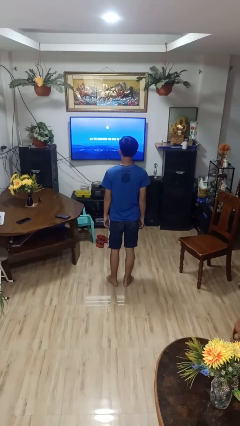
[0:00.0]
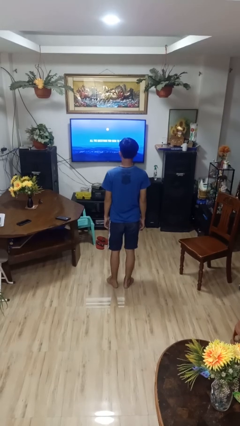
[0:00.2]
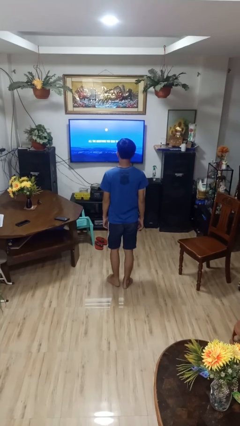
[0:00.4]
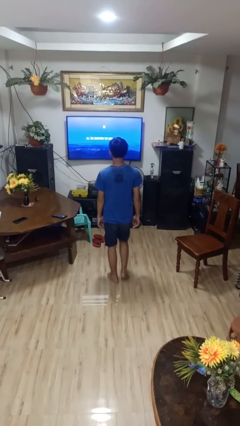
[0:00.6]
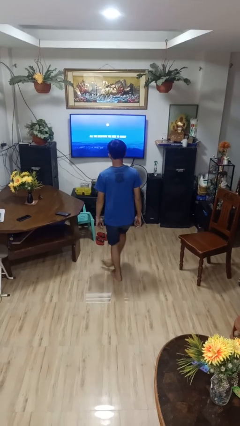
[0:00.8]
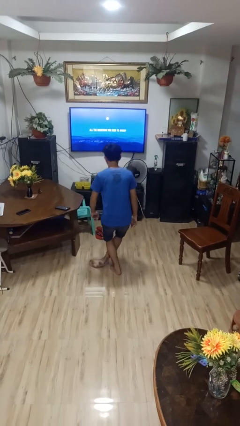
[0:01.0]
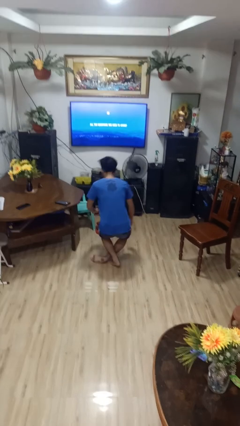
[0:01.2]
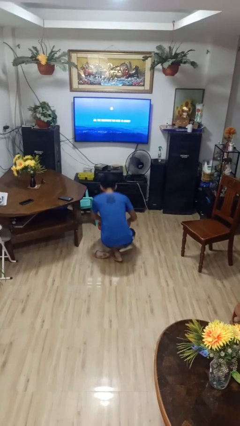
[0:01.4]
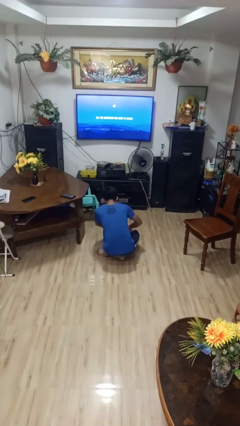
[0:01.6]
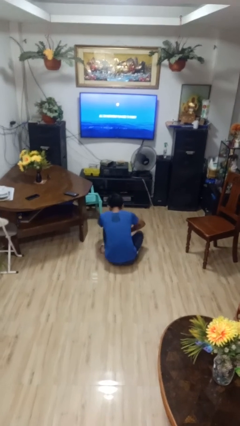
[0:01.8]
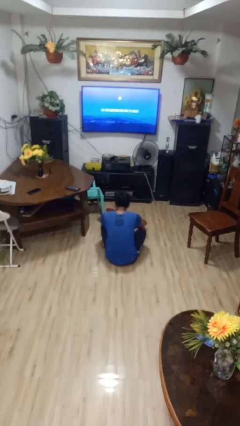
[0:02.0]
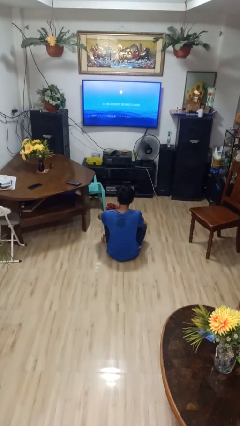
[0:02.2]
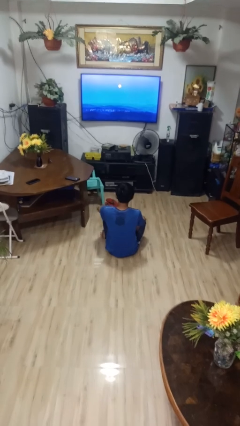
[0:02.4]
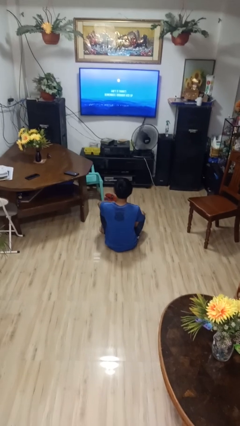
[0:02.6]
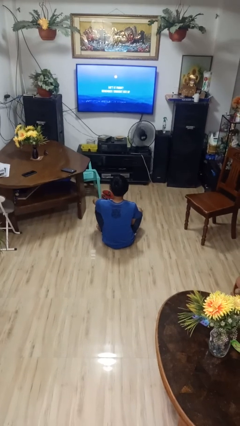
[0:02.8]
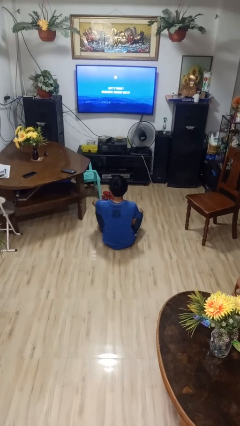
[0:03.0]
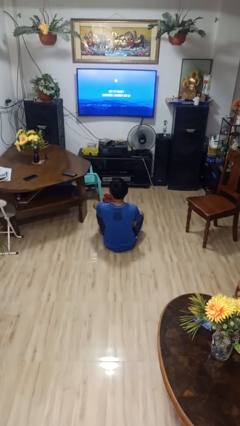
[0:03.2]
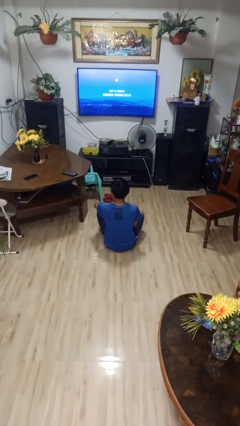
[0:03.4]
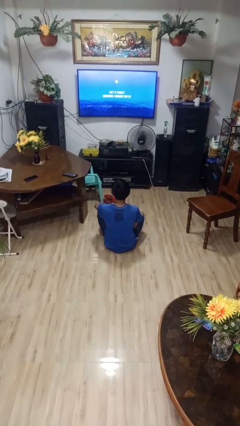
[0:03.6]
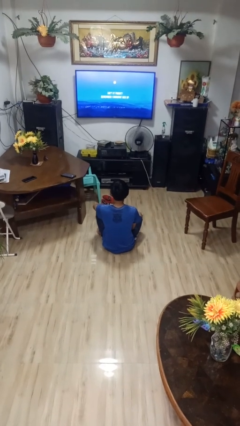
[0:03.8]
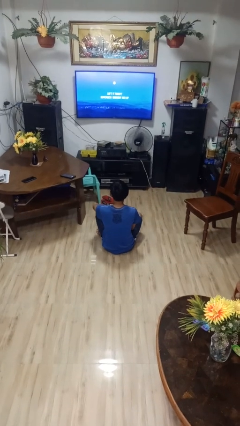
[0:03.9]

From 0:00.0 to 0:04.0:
person sits crisscross

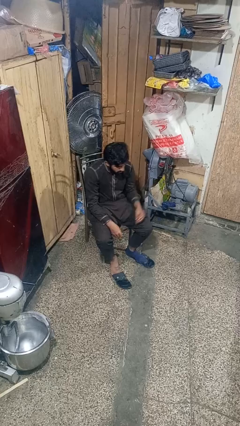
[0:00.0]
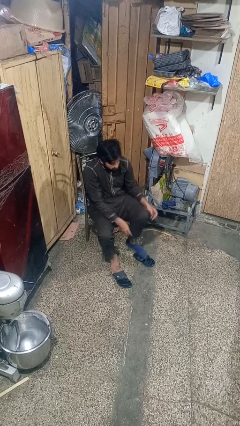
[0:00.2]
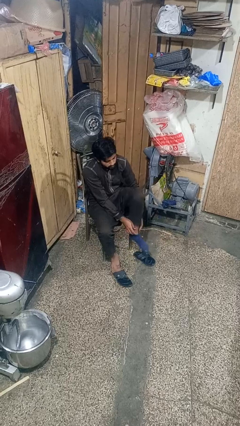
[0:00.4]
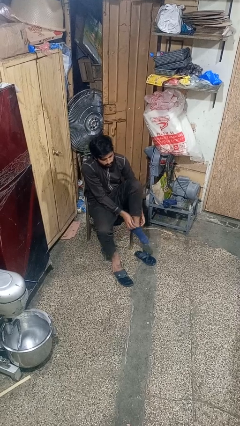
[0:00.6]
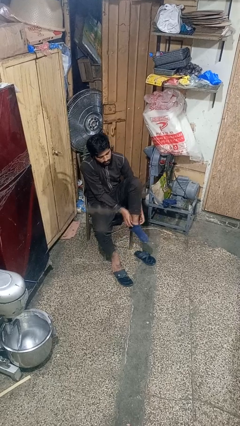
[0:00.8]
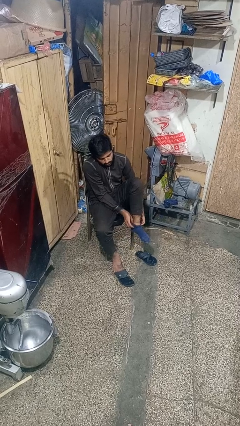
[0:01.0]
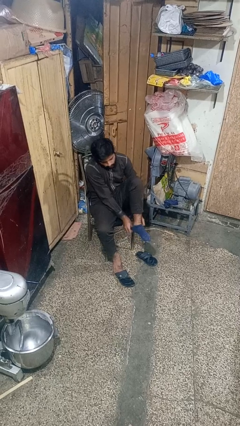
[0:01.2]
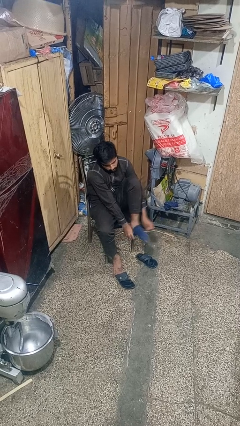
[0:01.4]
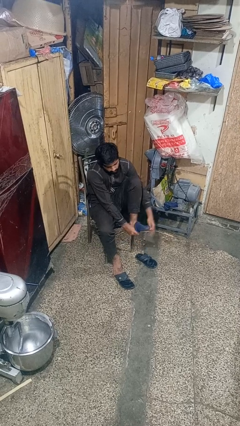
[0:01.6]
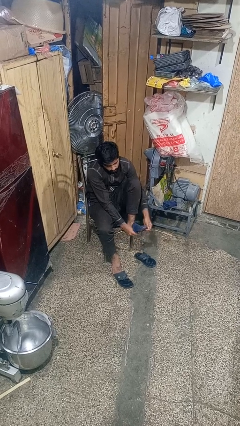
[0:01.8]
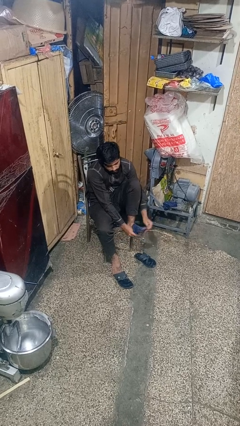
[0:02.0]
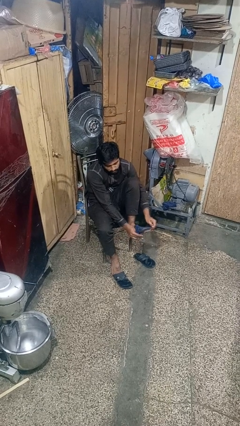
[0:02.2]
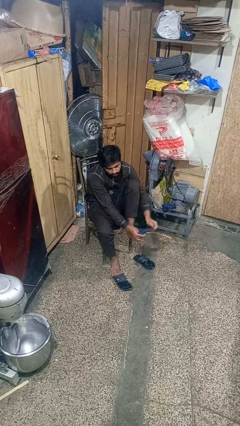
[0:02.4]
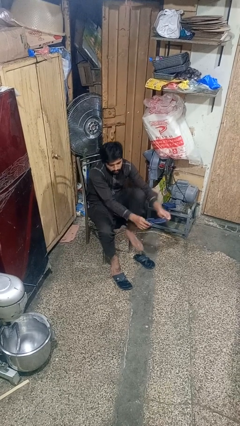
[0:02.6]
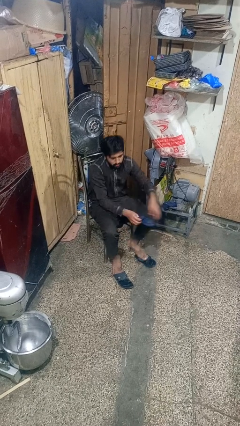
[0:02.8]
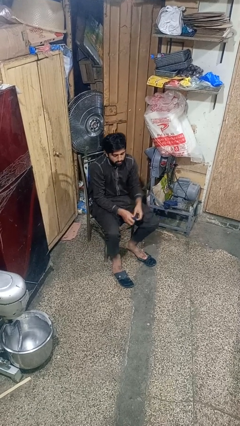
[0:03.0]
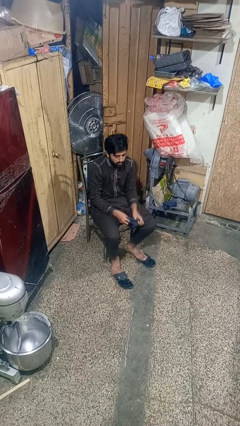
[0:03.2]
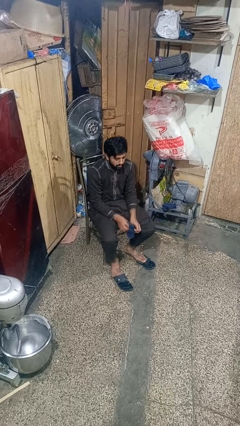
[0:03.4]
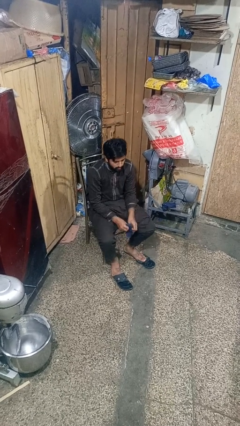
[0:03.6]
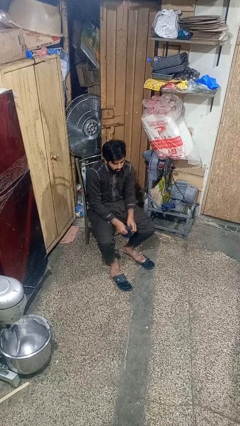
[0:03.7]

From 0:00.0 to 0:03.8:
person takes off socks

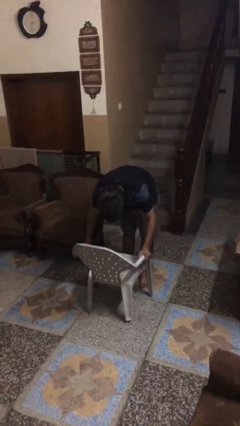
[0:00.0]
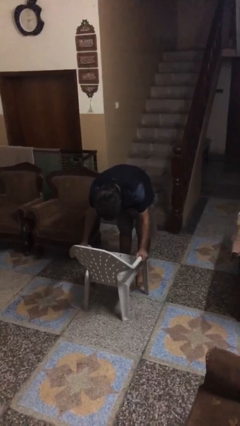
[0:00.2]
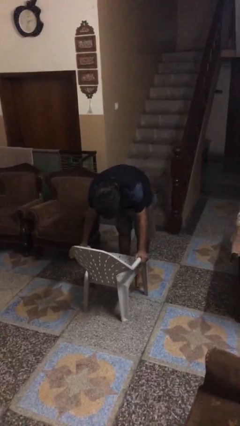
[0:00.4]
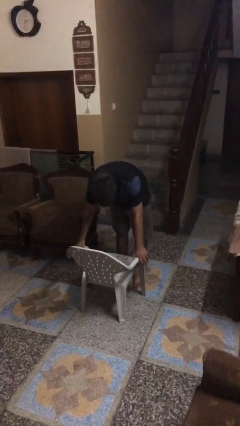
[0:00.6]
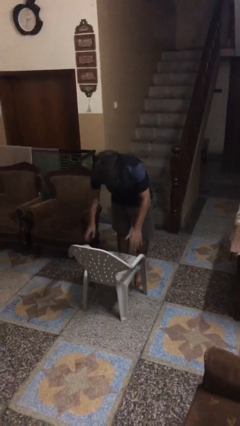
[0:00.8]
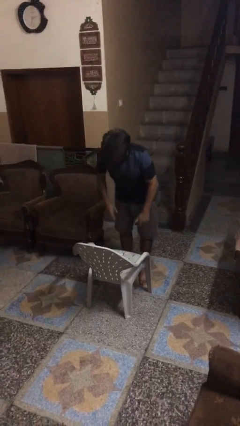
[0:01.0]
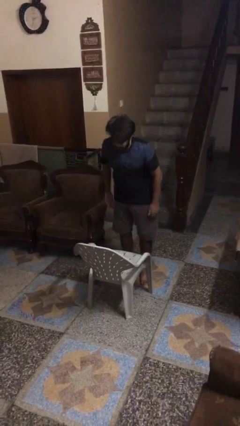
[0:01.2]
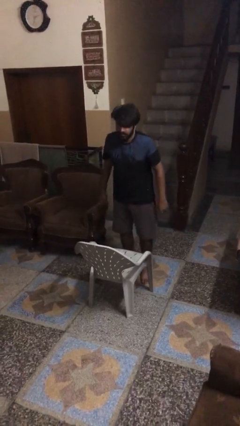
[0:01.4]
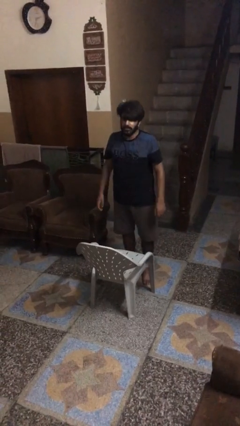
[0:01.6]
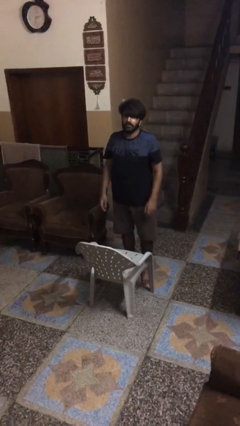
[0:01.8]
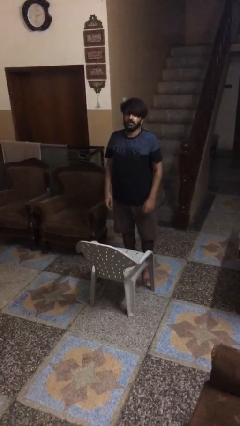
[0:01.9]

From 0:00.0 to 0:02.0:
person puts down object on floor

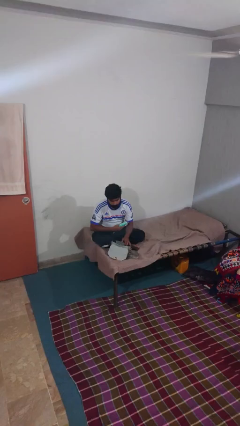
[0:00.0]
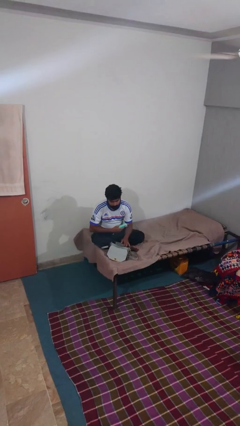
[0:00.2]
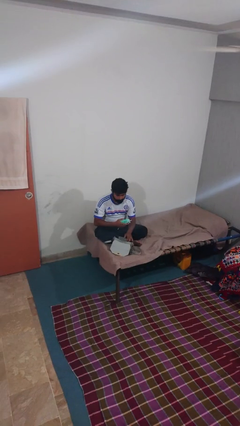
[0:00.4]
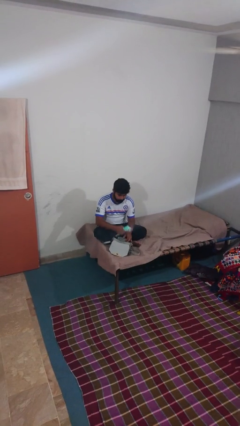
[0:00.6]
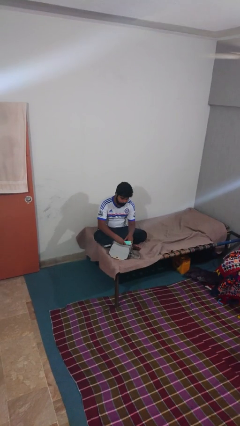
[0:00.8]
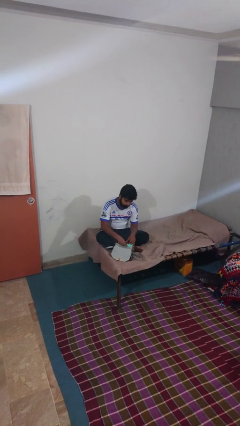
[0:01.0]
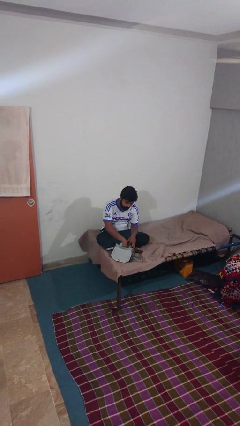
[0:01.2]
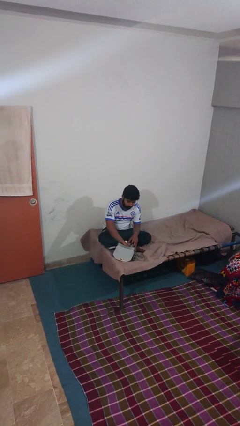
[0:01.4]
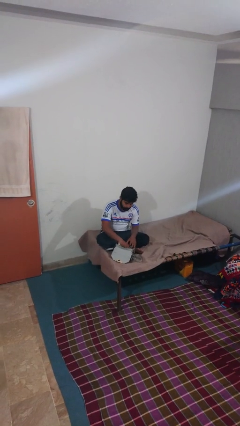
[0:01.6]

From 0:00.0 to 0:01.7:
person puts object into purse

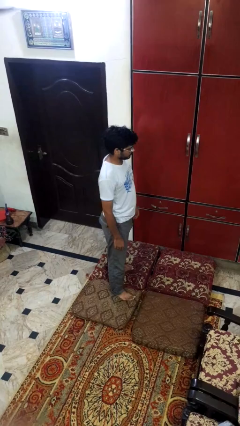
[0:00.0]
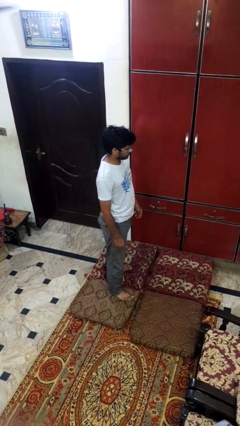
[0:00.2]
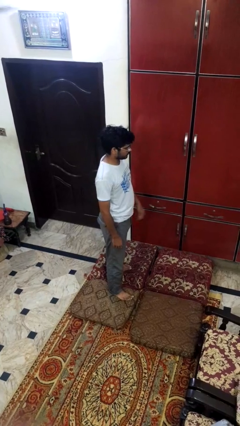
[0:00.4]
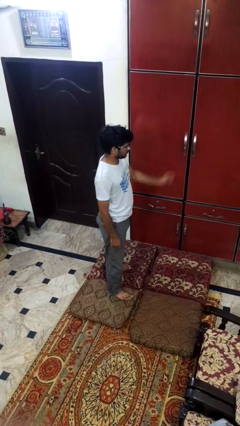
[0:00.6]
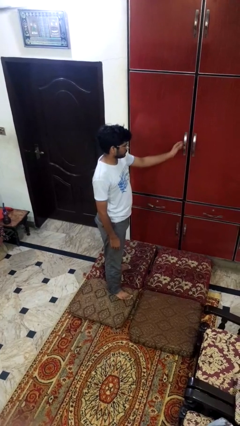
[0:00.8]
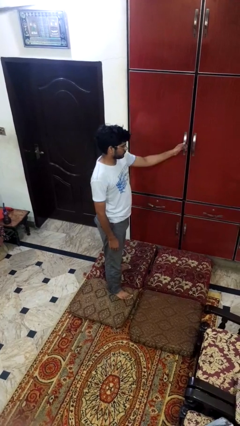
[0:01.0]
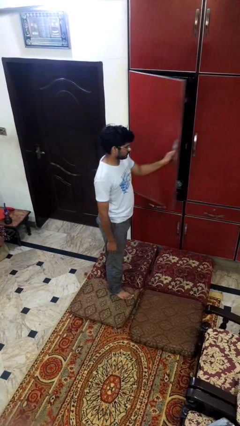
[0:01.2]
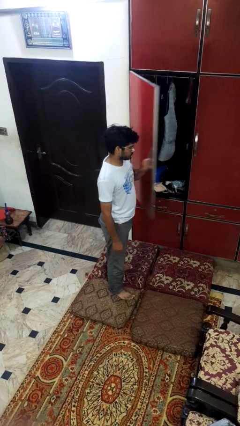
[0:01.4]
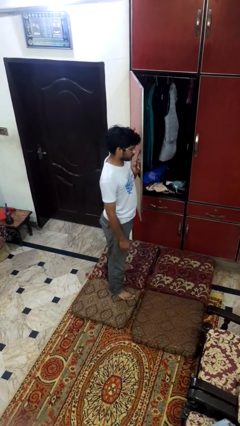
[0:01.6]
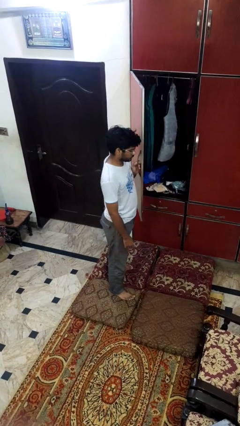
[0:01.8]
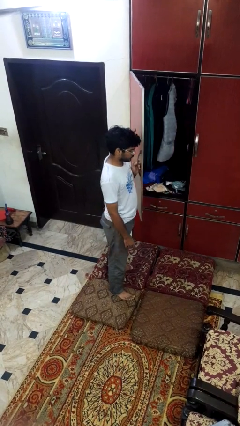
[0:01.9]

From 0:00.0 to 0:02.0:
person opens closet door

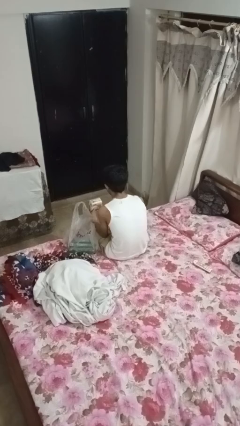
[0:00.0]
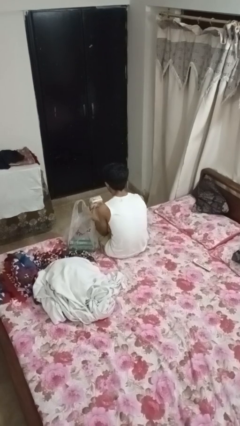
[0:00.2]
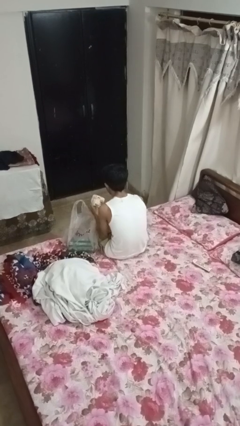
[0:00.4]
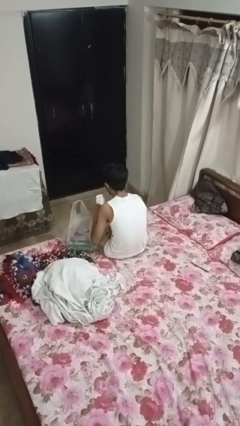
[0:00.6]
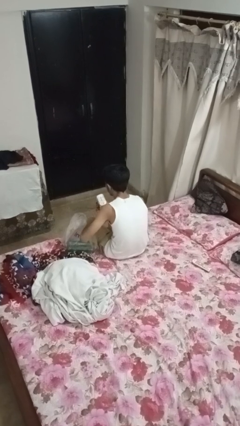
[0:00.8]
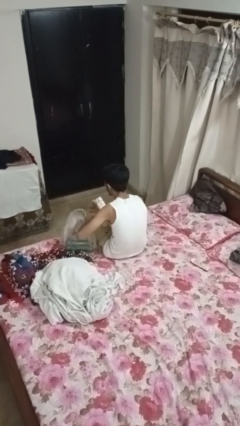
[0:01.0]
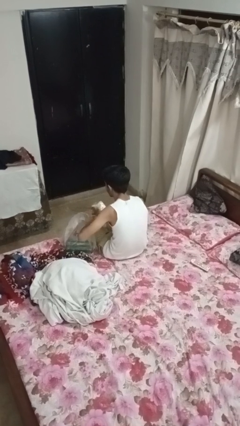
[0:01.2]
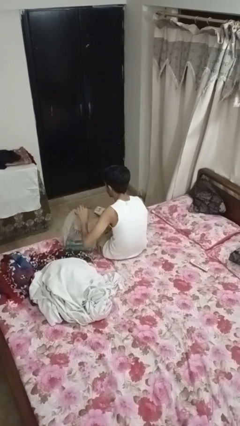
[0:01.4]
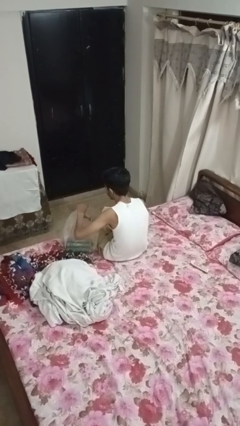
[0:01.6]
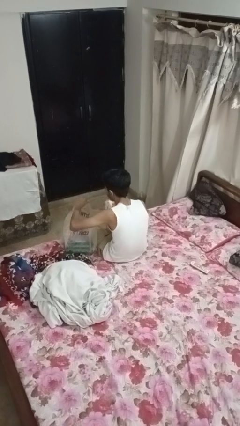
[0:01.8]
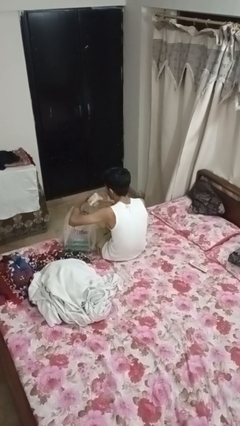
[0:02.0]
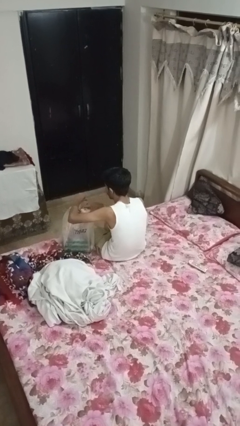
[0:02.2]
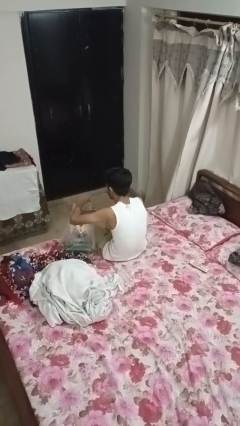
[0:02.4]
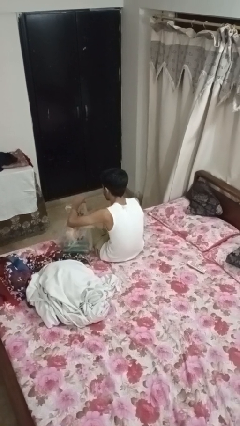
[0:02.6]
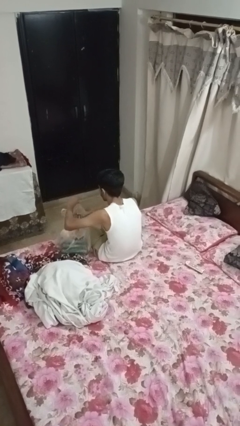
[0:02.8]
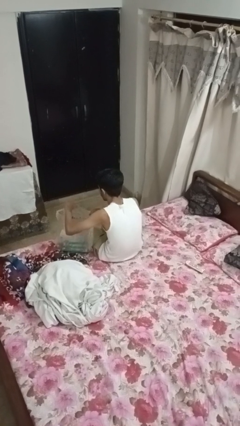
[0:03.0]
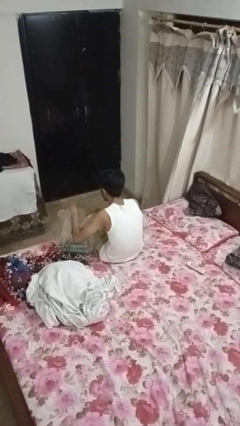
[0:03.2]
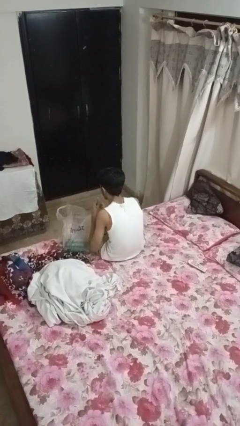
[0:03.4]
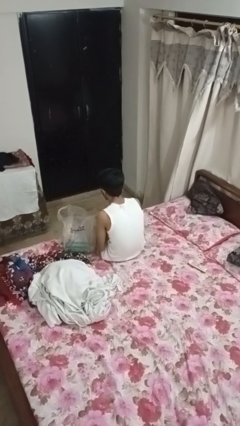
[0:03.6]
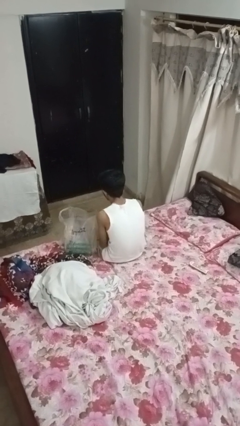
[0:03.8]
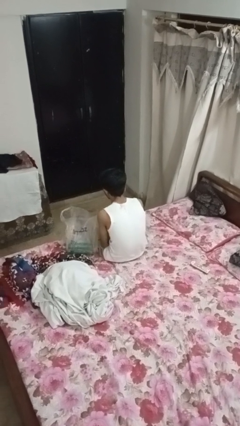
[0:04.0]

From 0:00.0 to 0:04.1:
person puts object into bag
